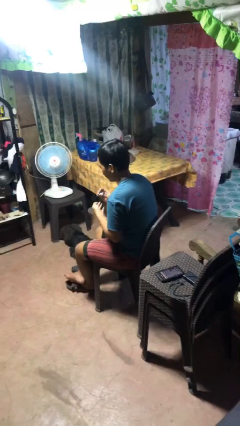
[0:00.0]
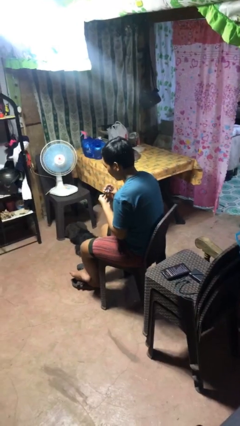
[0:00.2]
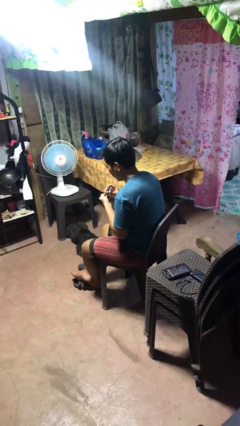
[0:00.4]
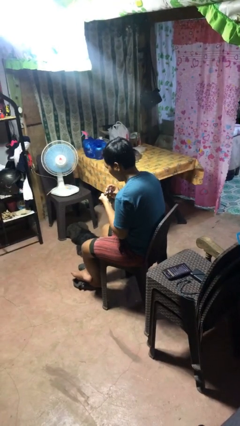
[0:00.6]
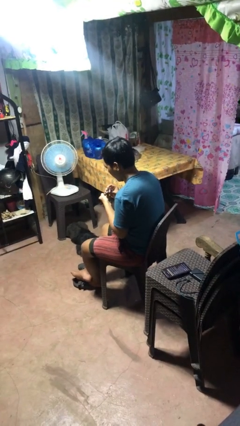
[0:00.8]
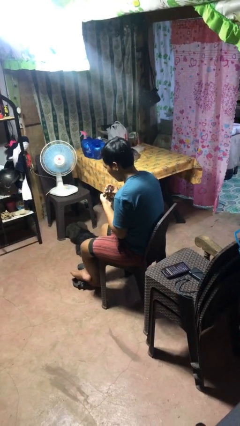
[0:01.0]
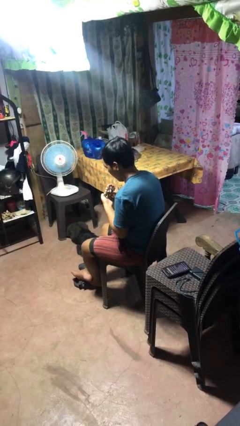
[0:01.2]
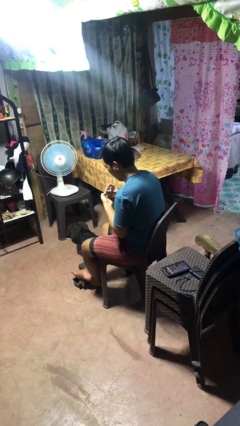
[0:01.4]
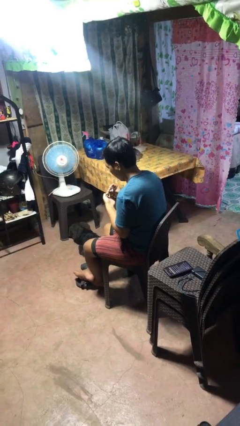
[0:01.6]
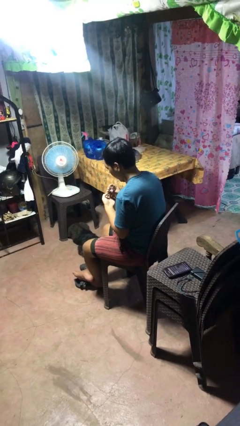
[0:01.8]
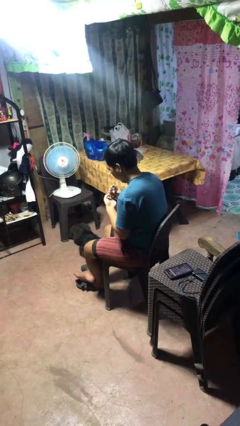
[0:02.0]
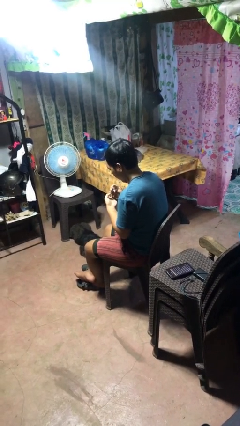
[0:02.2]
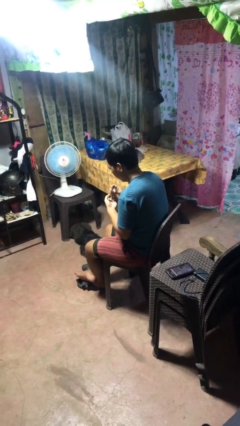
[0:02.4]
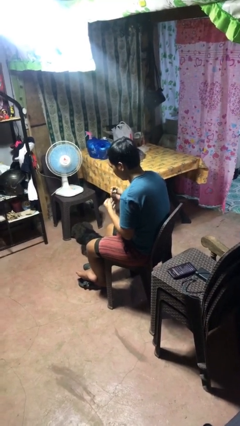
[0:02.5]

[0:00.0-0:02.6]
person clips fingernails

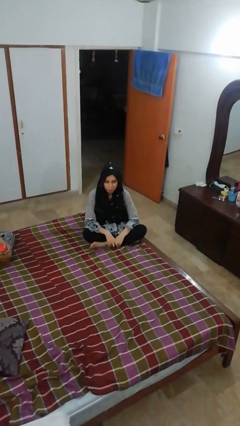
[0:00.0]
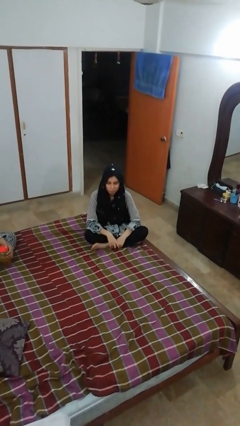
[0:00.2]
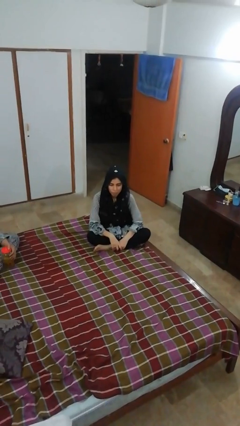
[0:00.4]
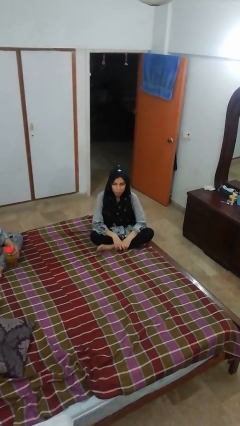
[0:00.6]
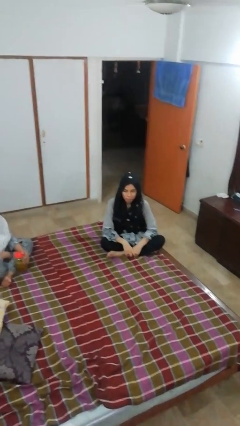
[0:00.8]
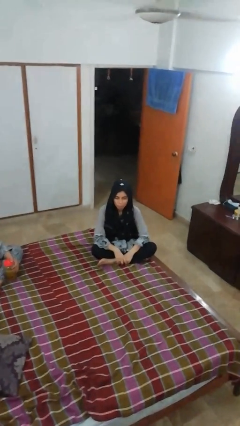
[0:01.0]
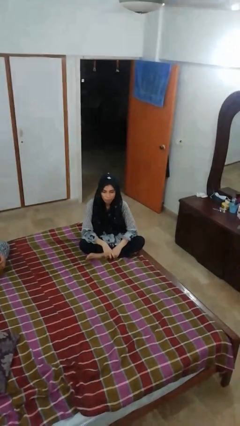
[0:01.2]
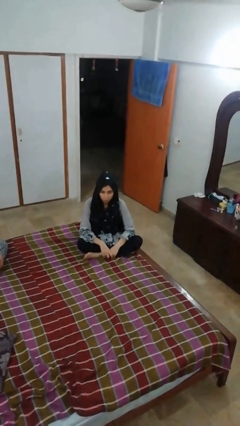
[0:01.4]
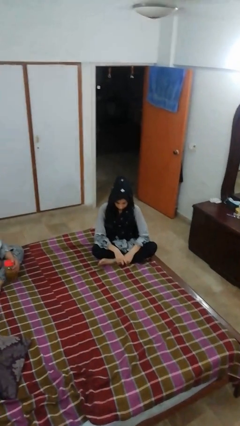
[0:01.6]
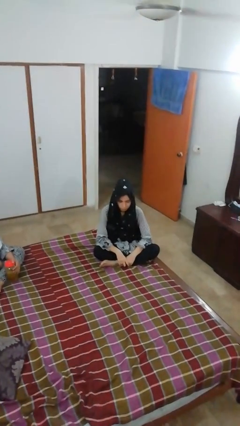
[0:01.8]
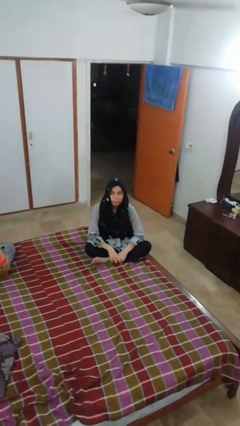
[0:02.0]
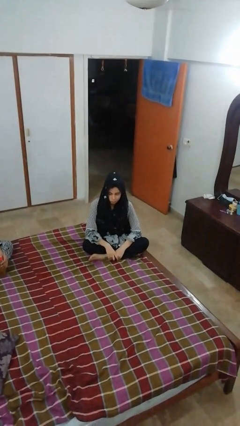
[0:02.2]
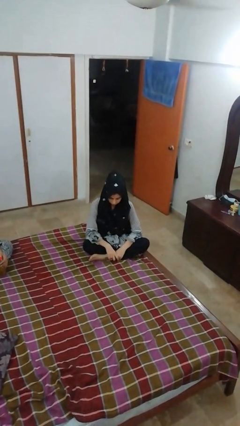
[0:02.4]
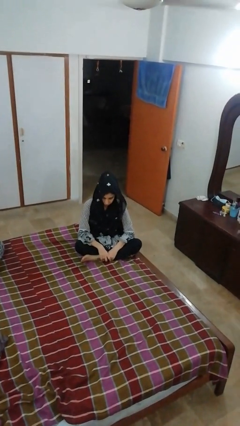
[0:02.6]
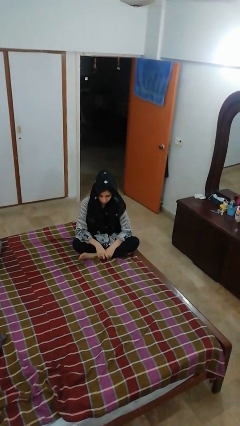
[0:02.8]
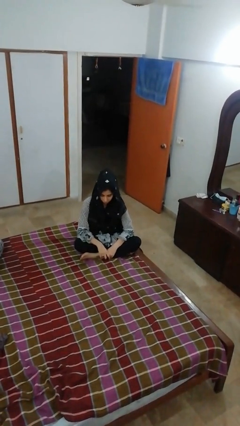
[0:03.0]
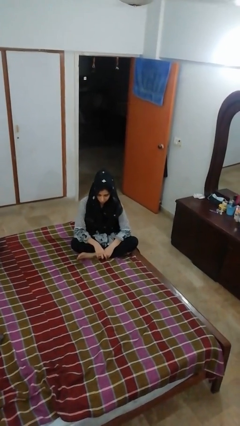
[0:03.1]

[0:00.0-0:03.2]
person nods head

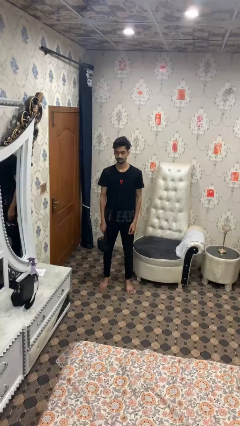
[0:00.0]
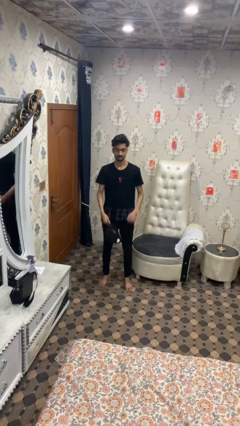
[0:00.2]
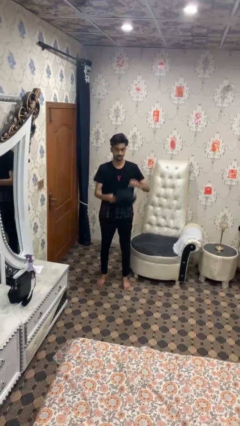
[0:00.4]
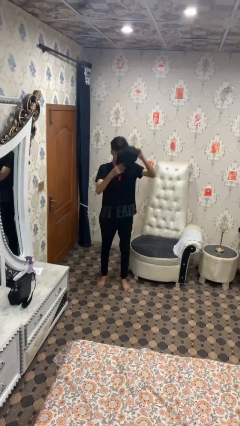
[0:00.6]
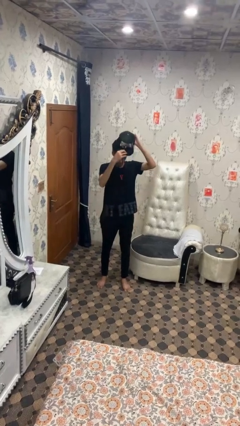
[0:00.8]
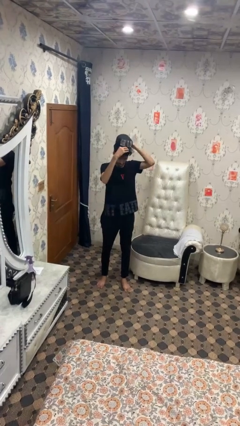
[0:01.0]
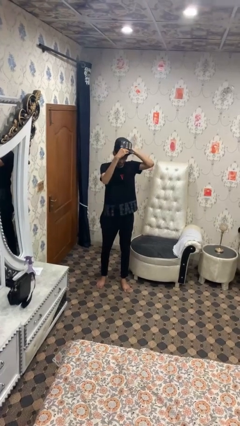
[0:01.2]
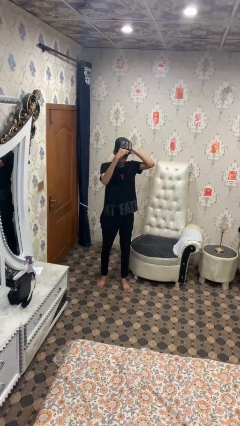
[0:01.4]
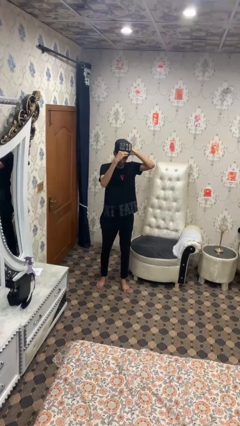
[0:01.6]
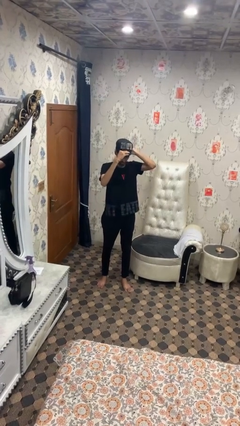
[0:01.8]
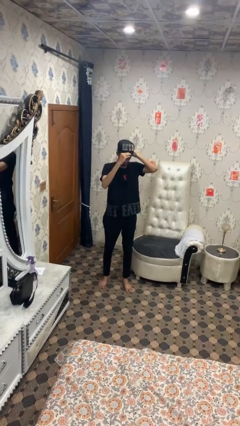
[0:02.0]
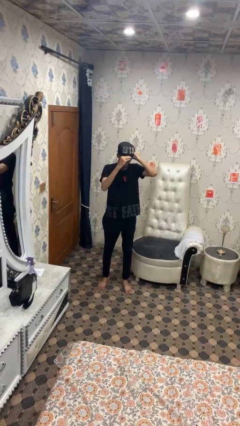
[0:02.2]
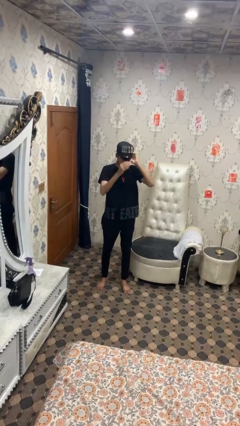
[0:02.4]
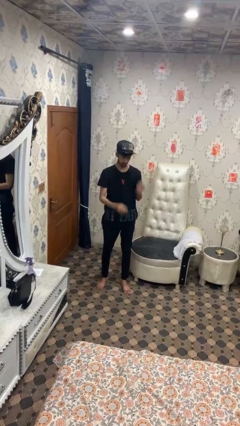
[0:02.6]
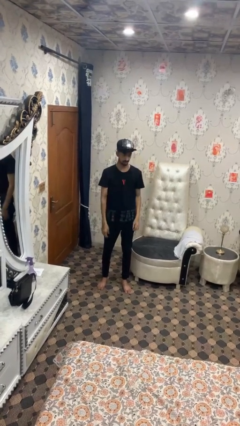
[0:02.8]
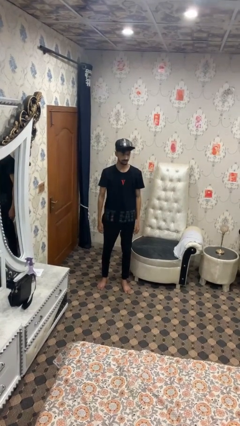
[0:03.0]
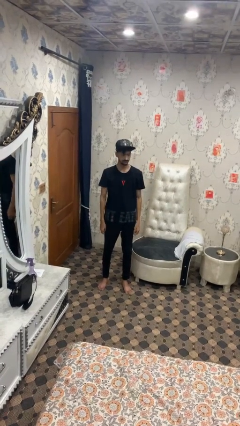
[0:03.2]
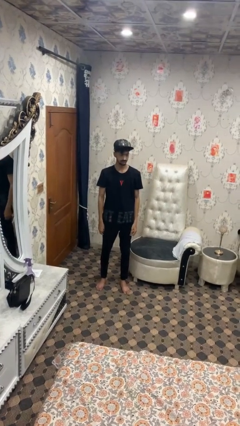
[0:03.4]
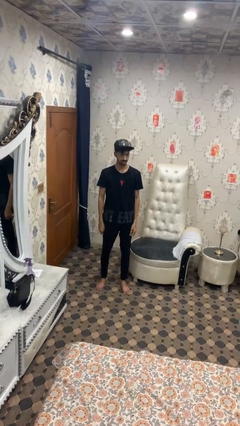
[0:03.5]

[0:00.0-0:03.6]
person puts on hat

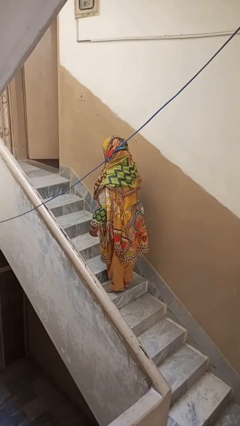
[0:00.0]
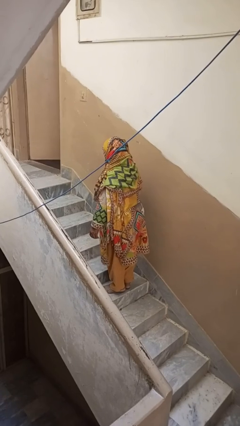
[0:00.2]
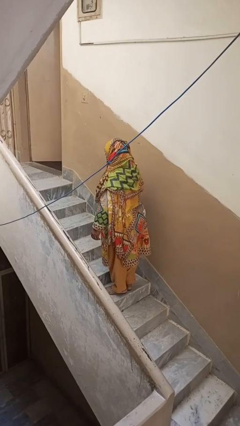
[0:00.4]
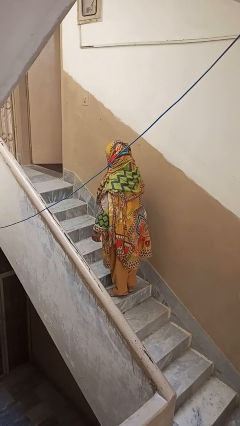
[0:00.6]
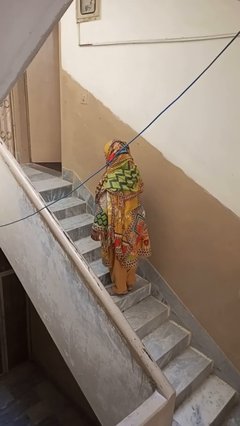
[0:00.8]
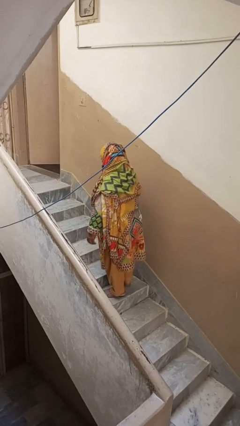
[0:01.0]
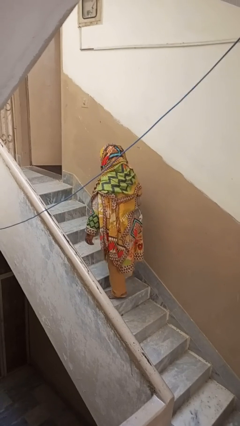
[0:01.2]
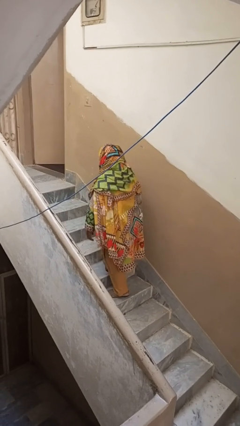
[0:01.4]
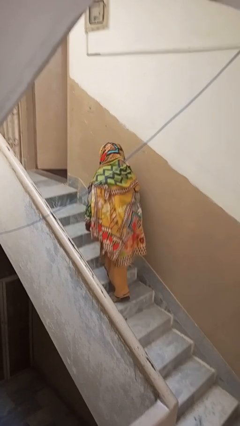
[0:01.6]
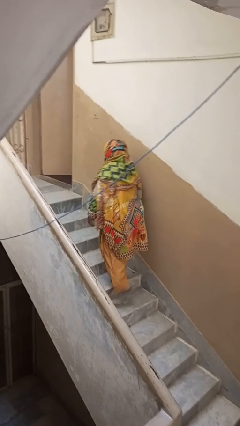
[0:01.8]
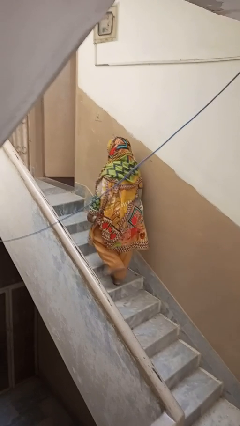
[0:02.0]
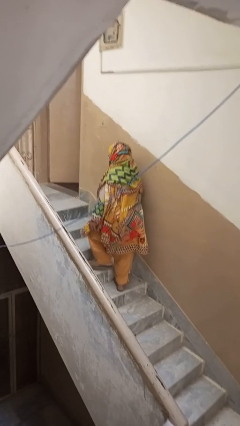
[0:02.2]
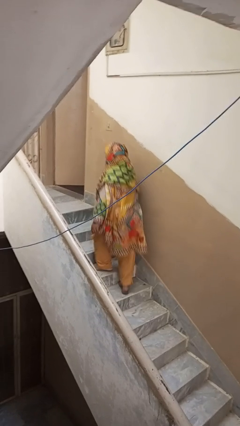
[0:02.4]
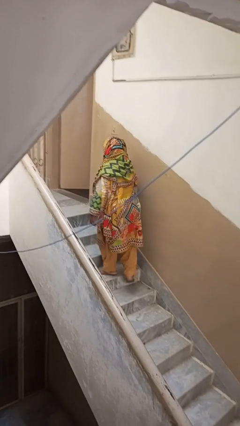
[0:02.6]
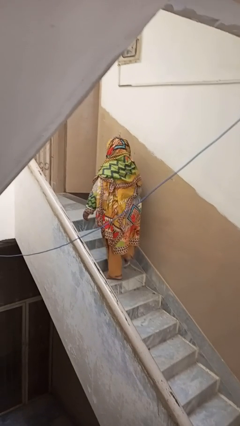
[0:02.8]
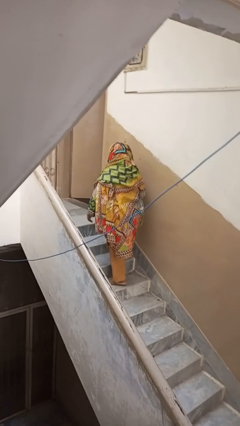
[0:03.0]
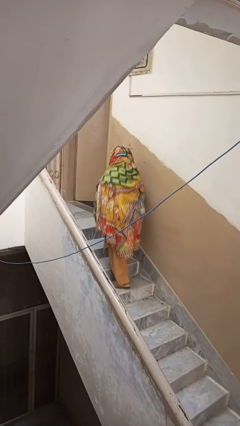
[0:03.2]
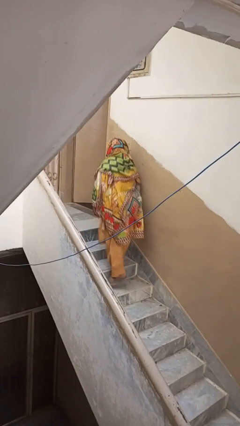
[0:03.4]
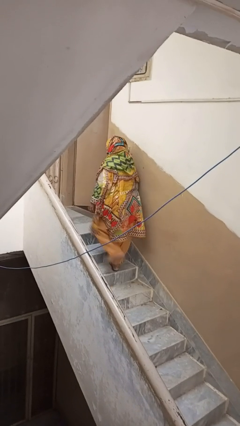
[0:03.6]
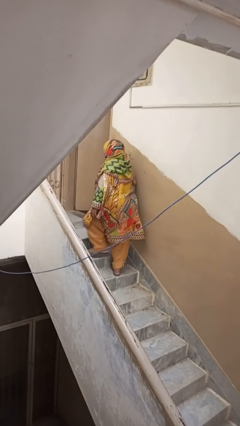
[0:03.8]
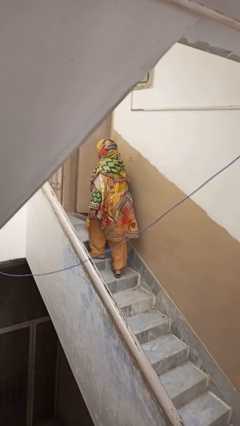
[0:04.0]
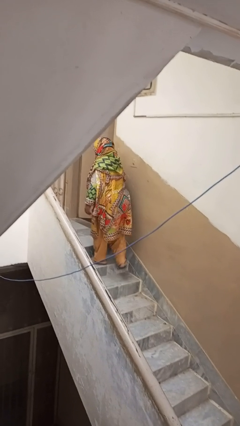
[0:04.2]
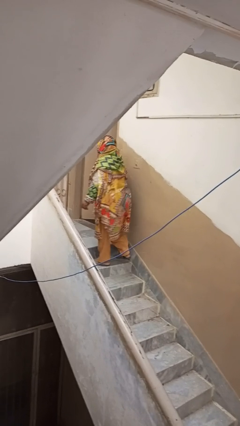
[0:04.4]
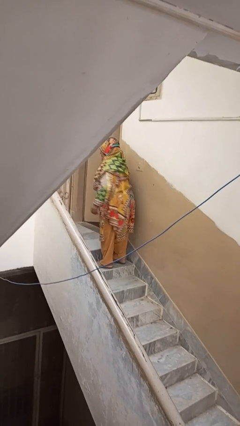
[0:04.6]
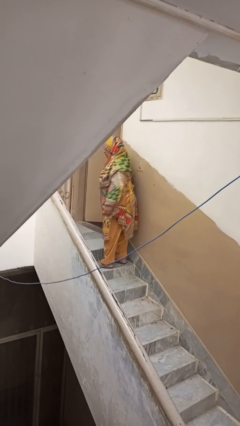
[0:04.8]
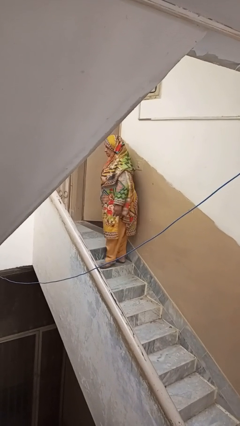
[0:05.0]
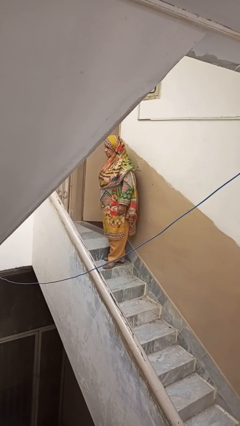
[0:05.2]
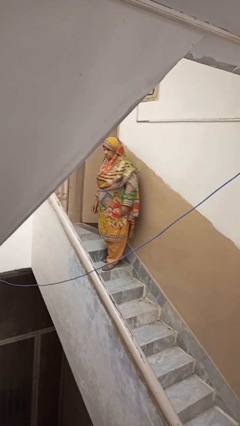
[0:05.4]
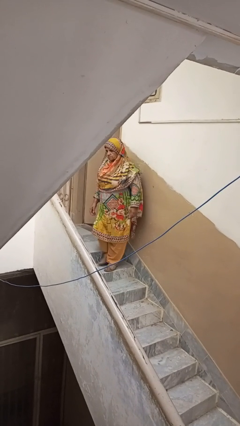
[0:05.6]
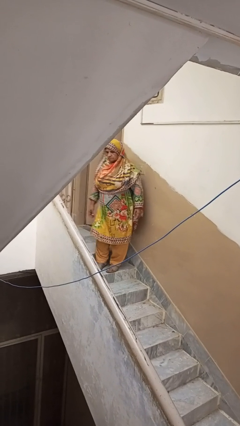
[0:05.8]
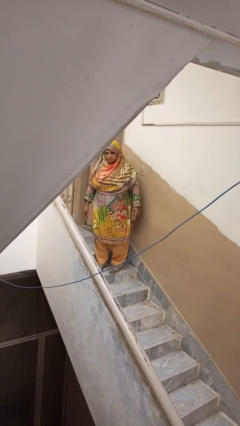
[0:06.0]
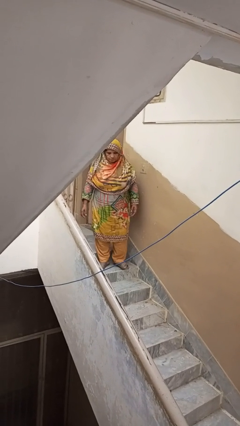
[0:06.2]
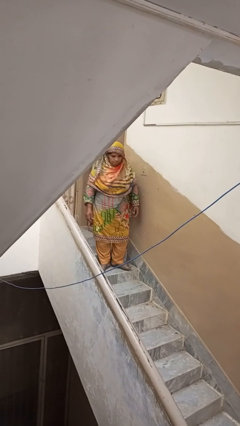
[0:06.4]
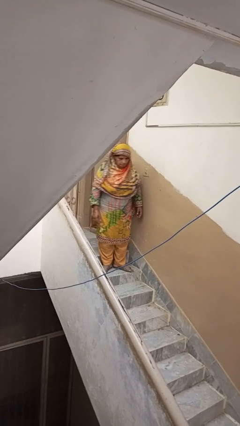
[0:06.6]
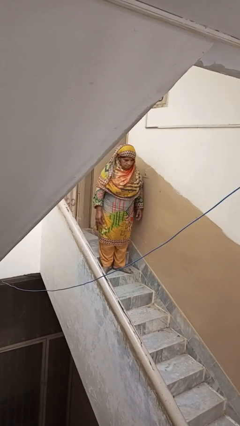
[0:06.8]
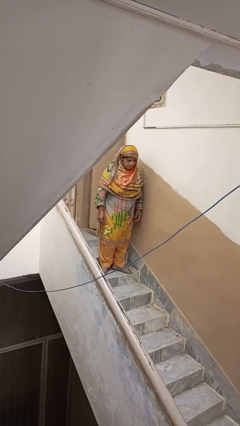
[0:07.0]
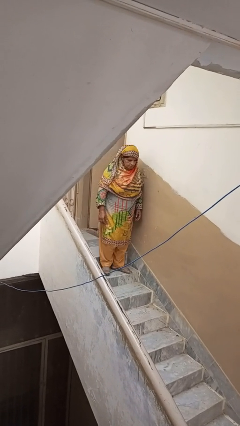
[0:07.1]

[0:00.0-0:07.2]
person climbs up stairs

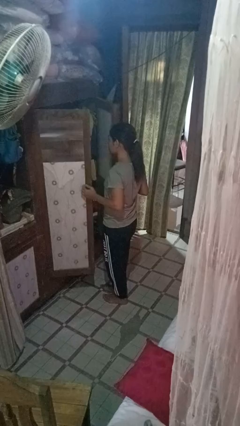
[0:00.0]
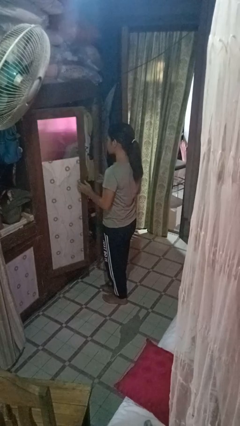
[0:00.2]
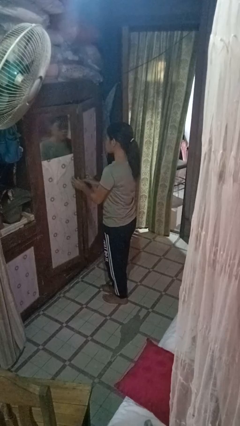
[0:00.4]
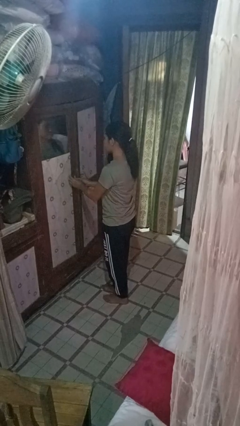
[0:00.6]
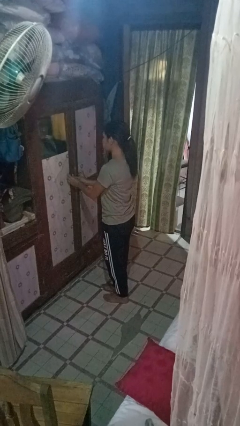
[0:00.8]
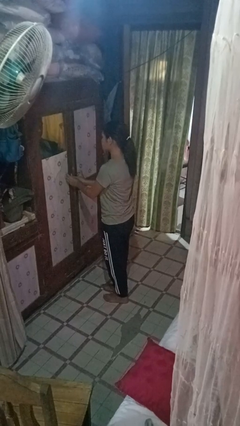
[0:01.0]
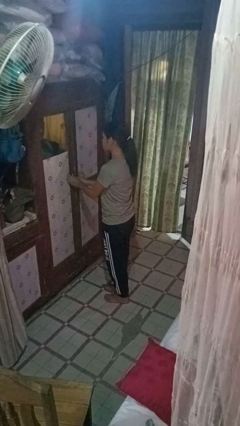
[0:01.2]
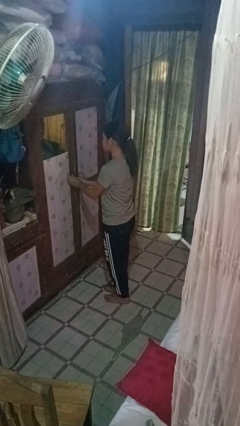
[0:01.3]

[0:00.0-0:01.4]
person closes closet door
